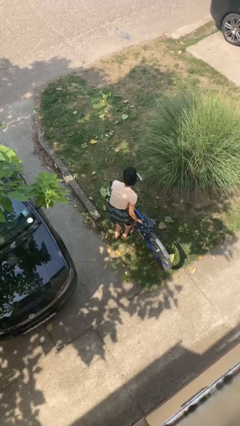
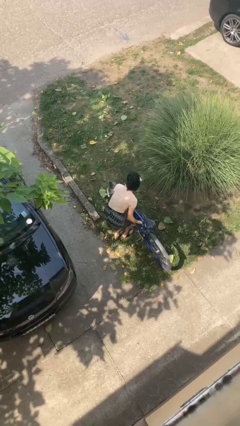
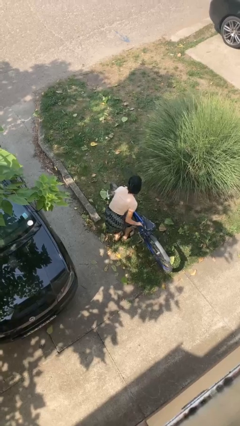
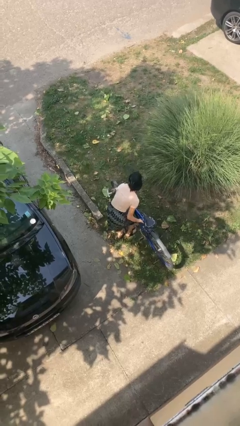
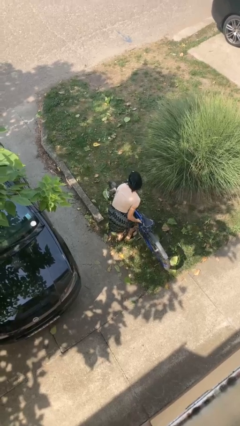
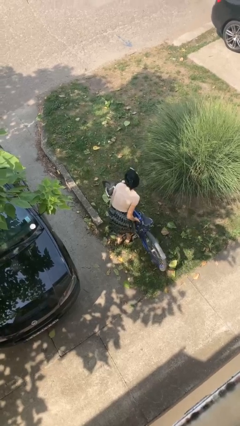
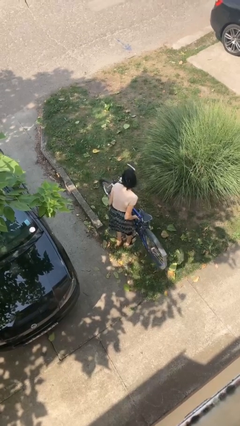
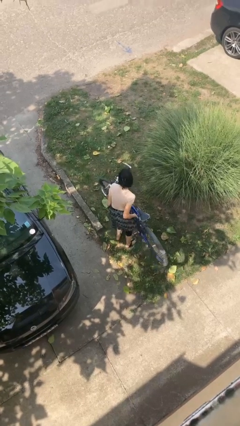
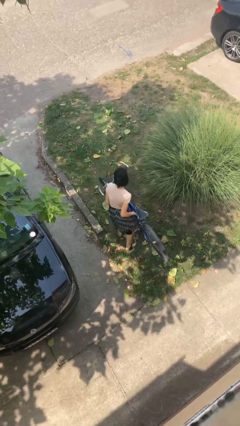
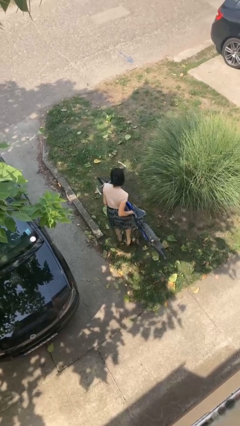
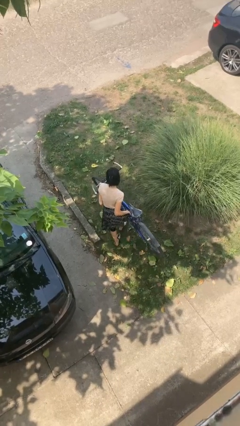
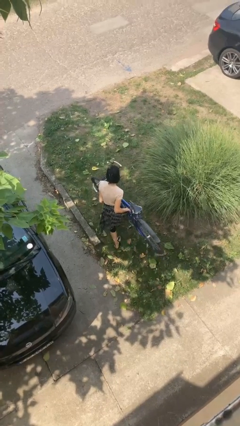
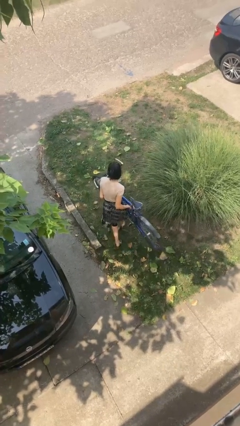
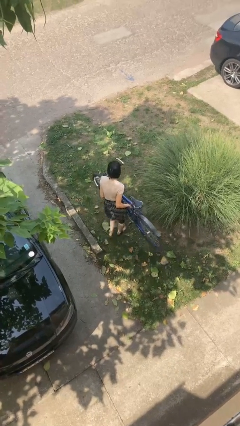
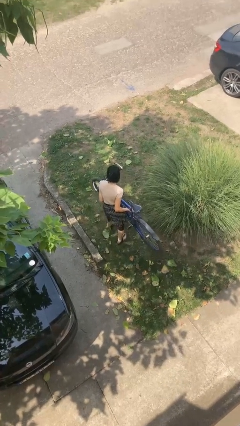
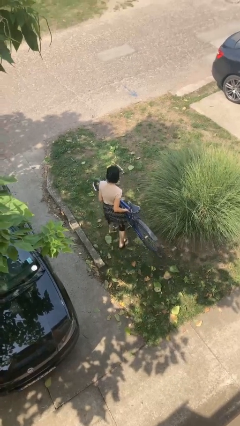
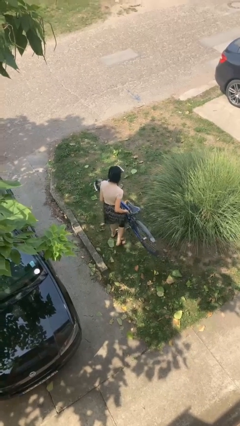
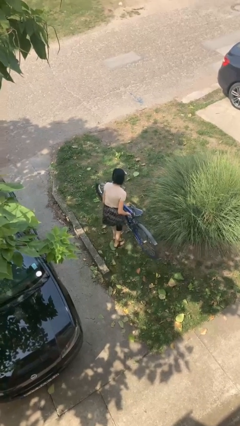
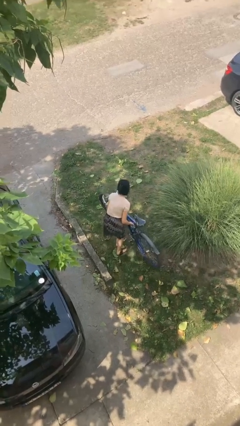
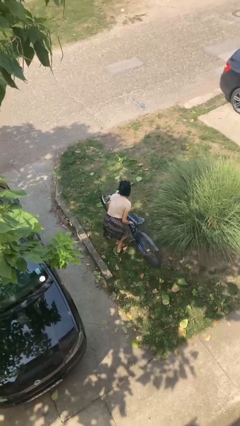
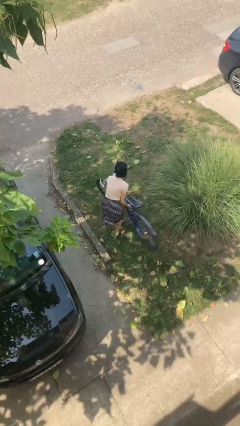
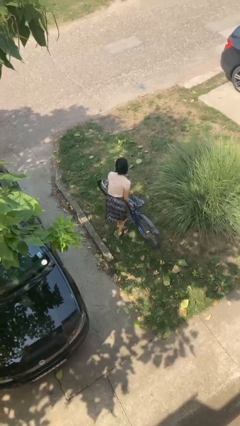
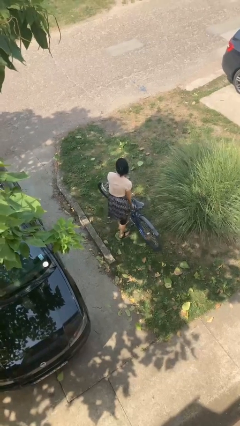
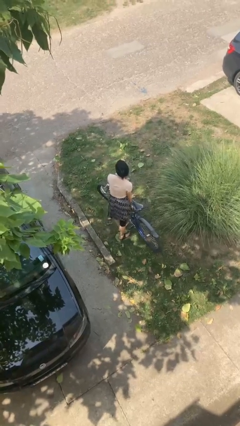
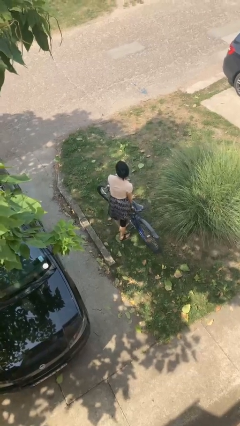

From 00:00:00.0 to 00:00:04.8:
person carries bicycle

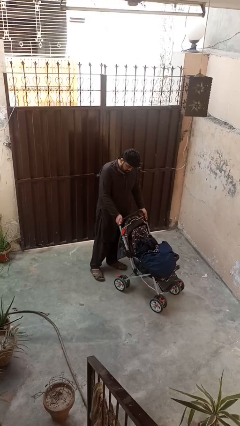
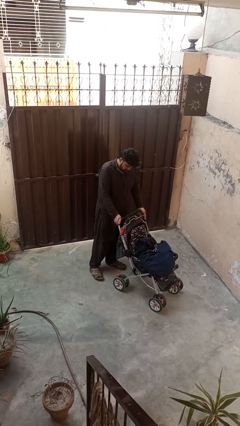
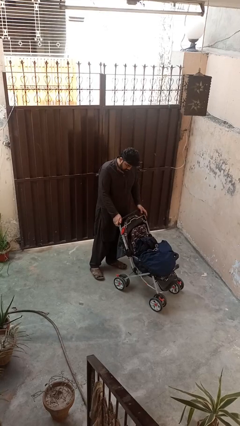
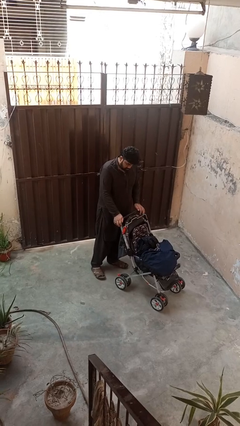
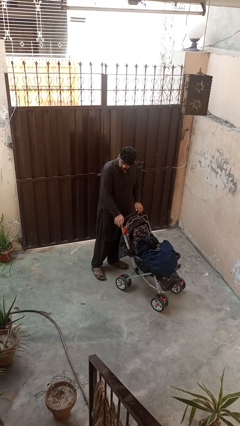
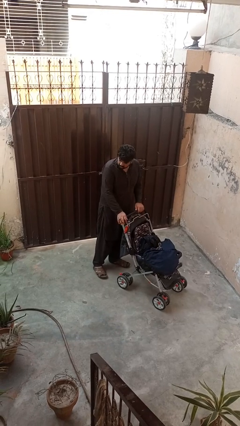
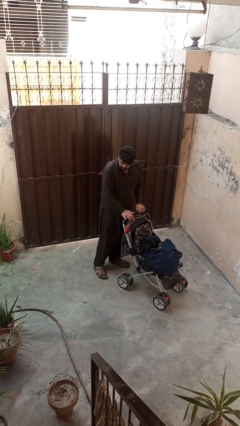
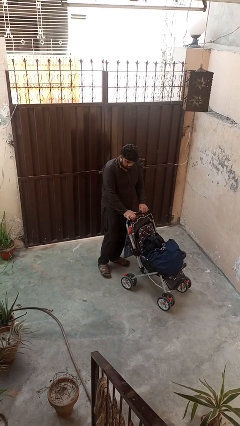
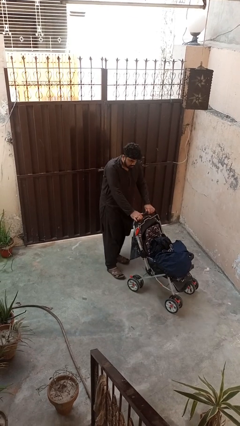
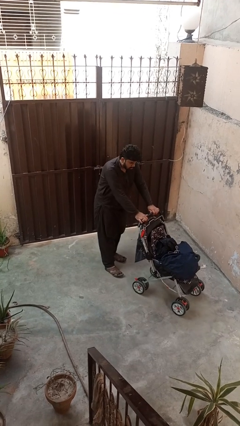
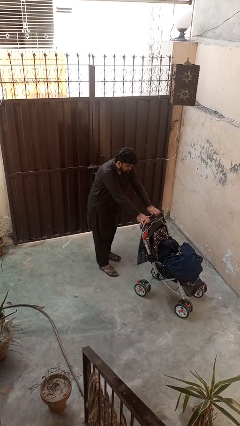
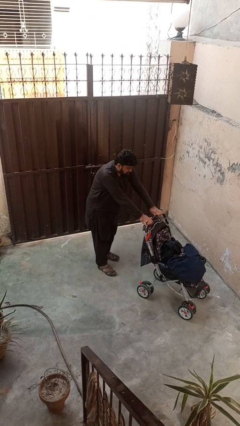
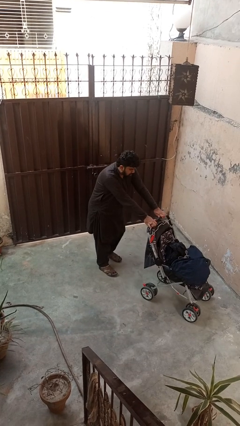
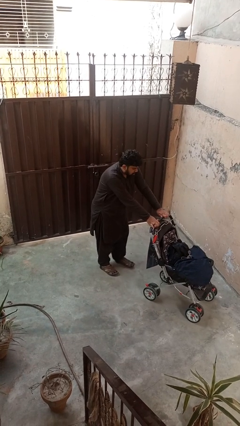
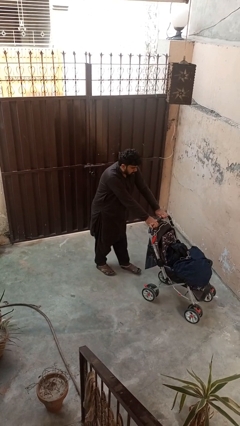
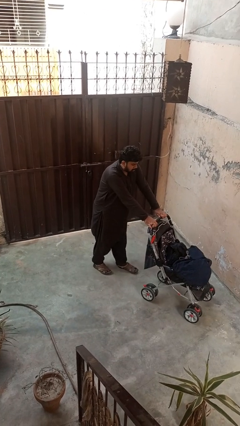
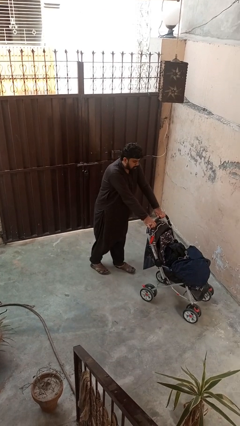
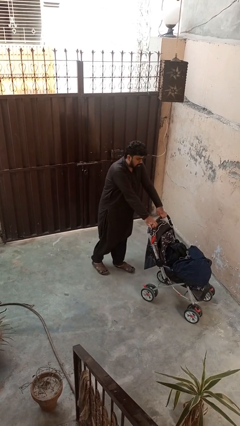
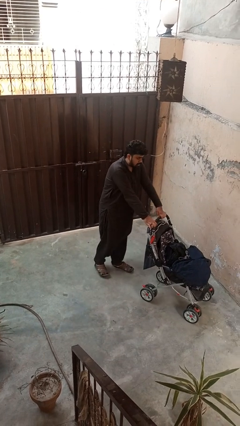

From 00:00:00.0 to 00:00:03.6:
person pushes wheeled cart

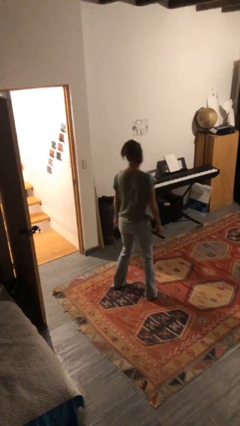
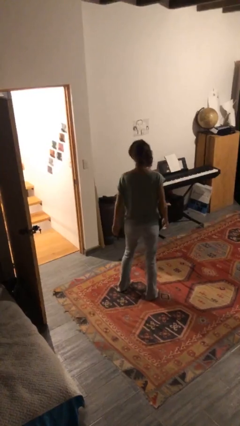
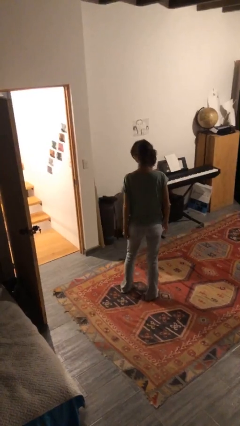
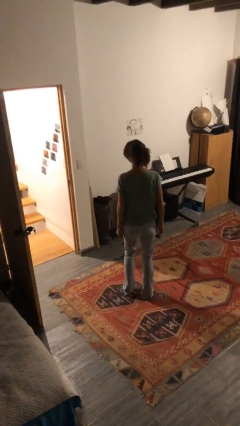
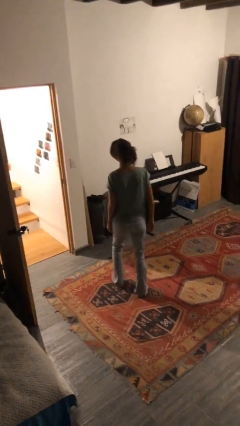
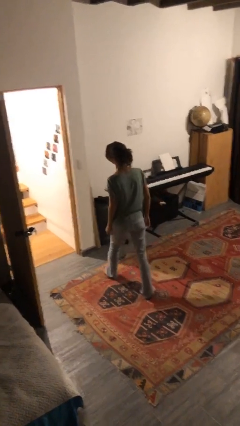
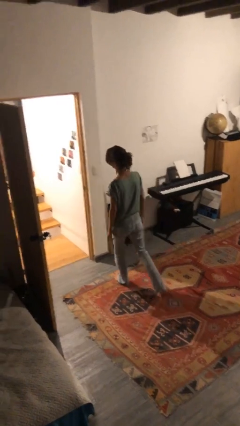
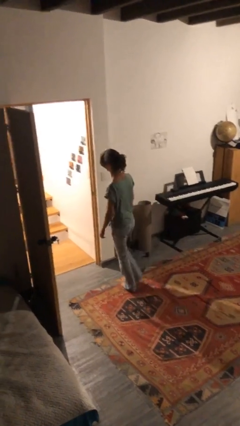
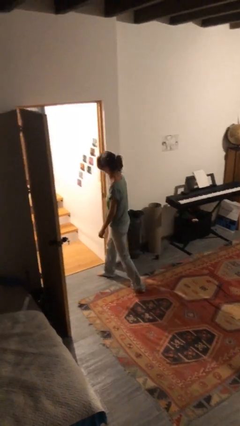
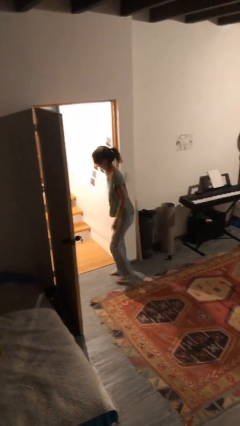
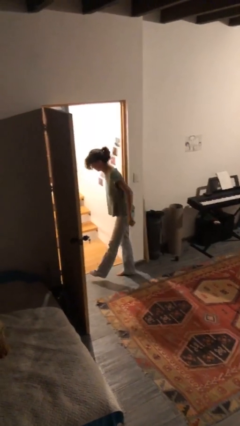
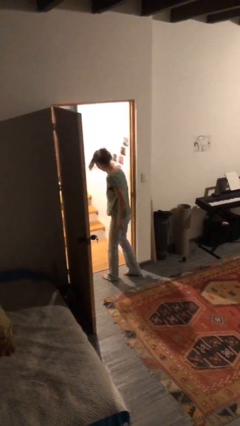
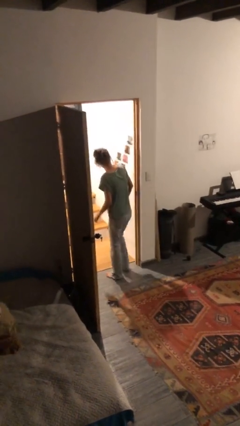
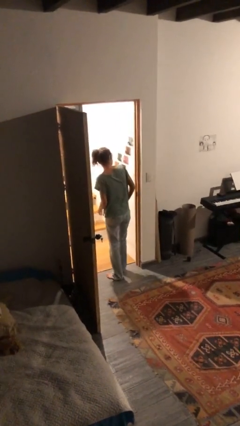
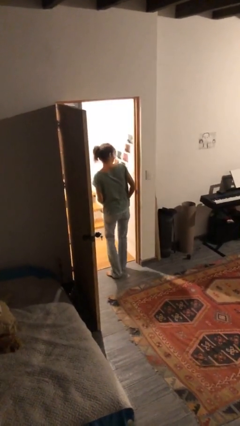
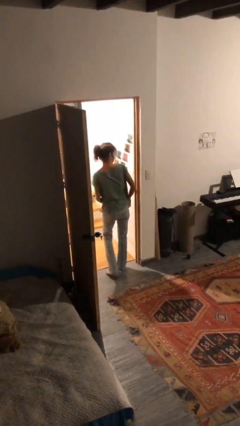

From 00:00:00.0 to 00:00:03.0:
person bumps into wall

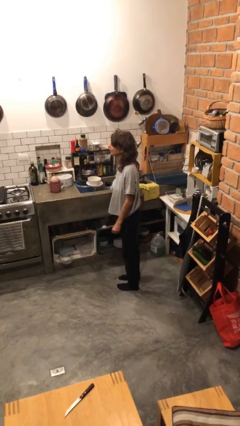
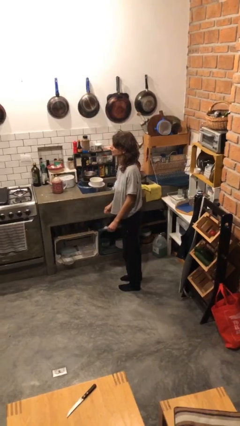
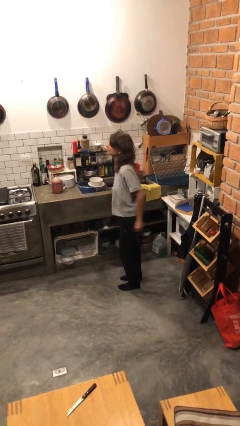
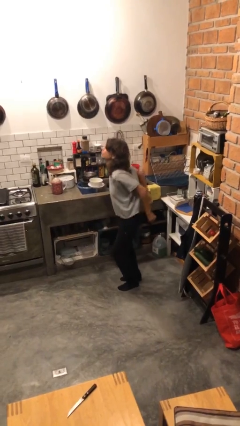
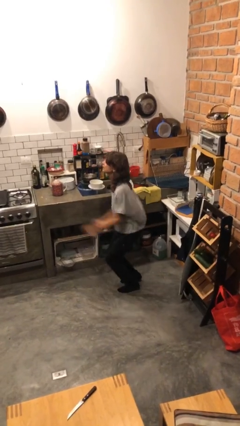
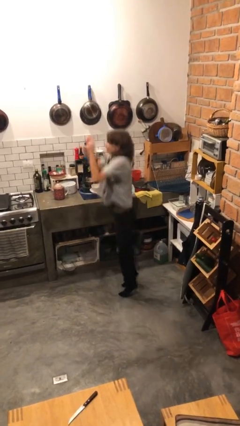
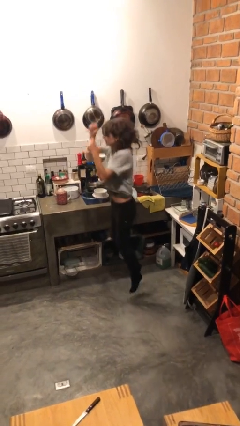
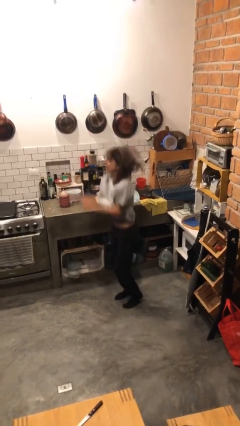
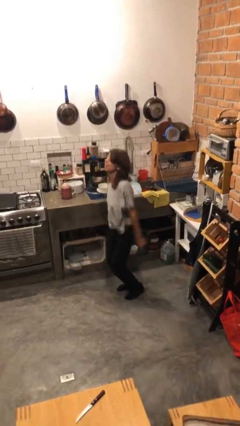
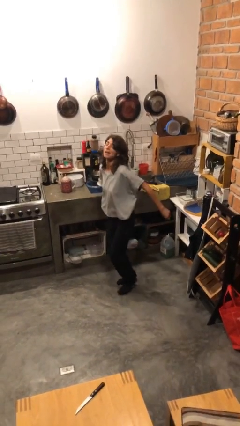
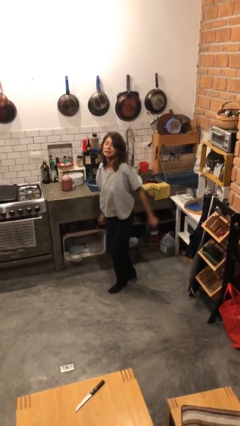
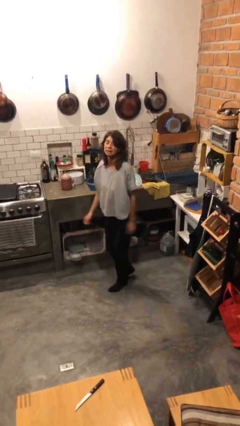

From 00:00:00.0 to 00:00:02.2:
person jumps

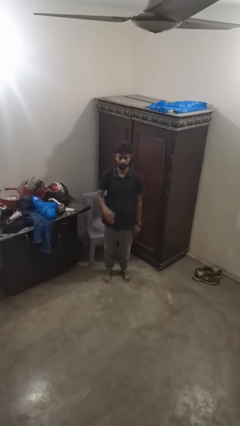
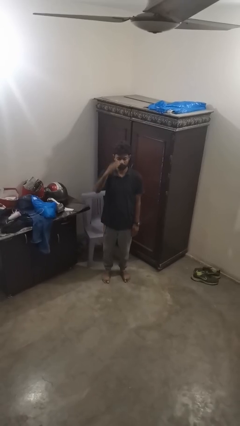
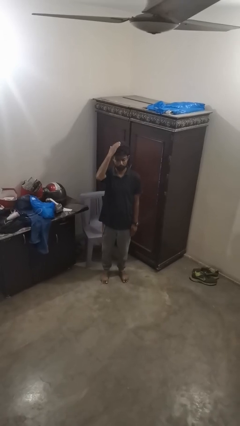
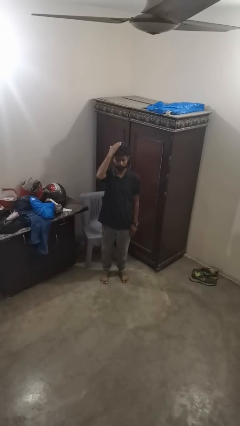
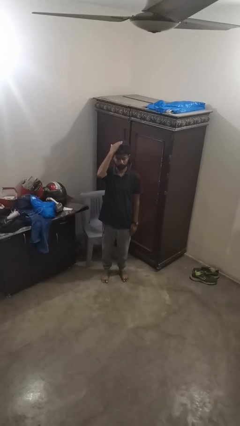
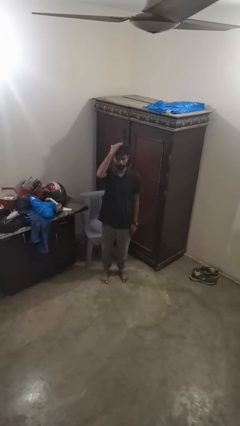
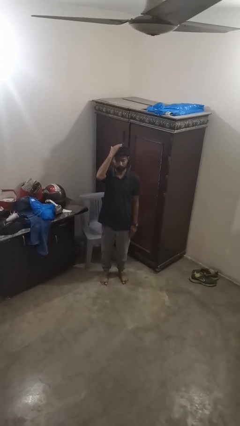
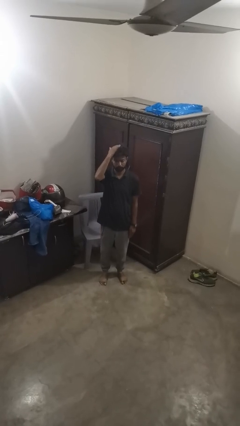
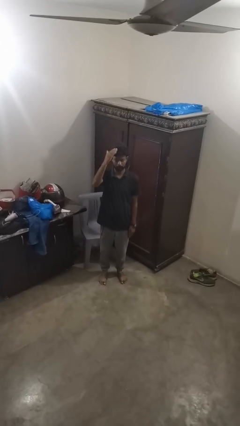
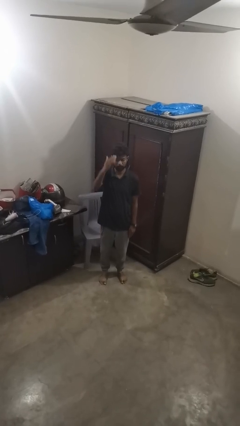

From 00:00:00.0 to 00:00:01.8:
person pats head

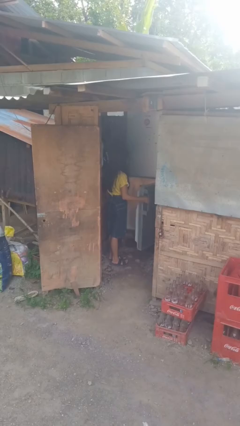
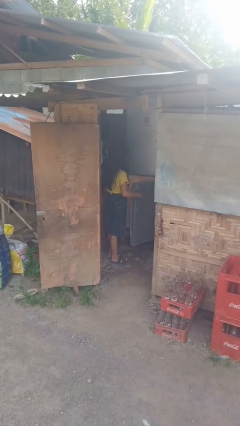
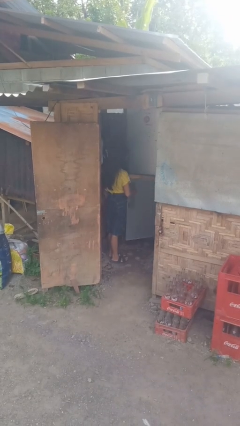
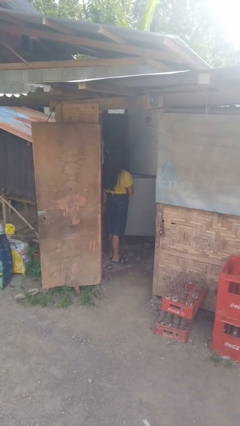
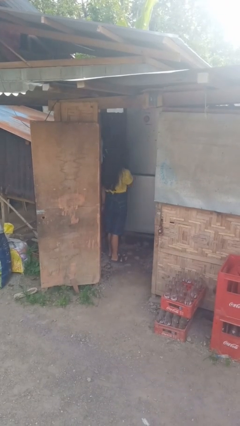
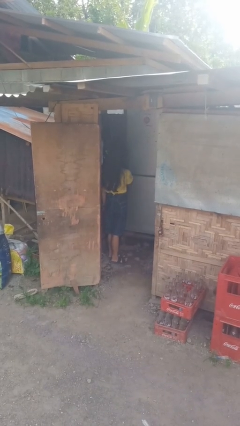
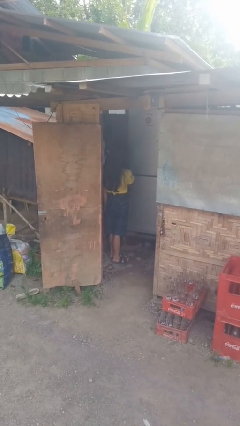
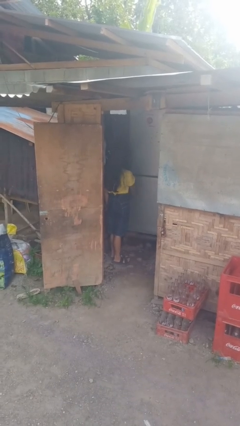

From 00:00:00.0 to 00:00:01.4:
person closes refrigerator

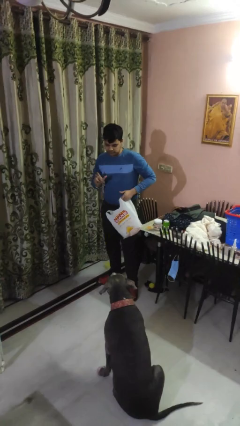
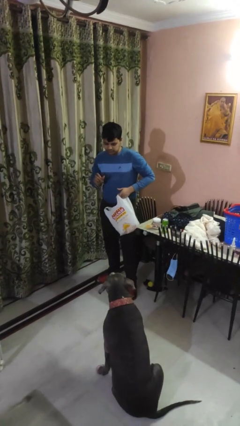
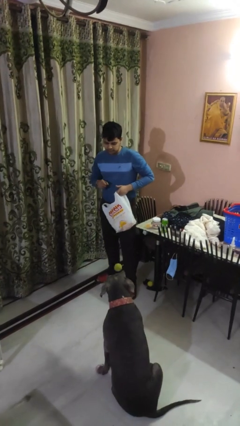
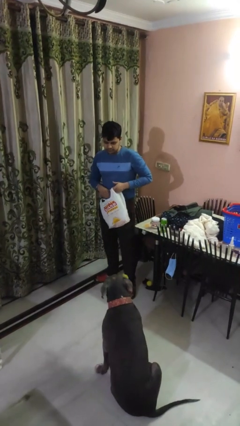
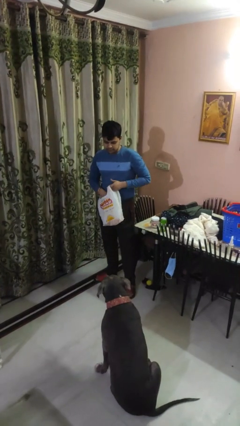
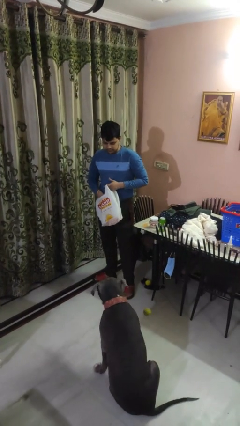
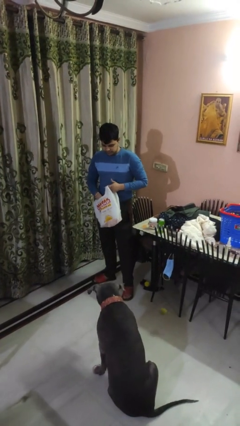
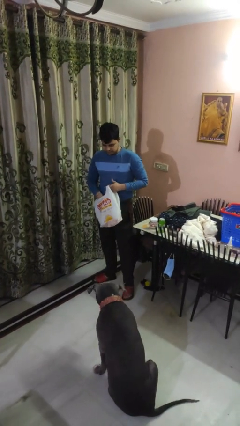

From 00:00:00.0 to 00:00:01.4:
person throws object to dog
